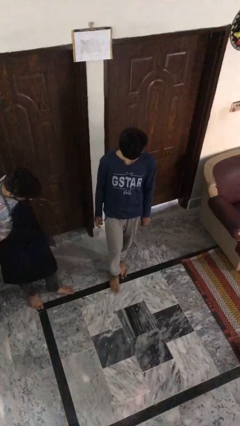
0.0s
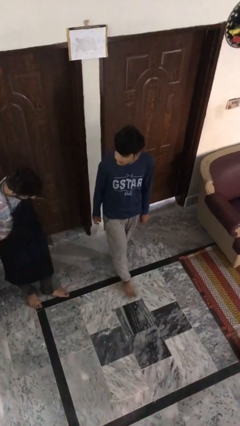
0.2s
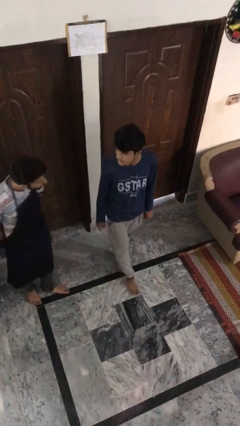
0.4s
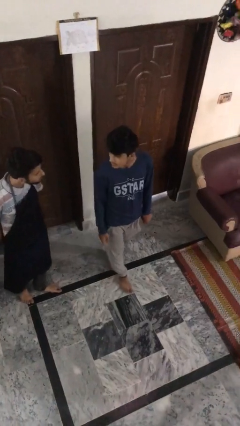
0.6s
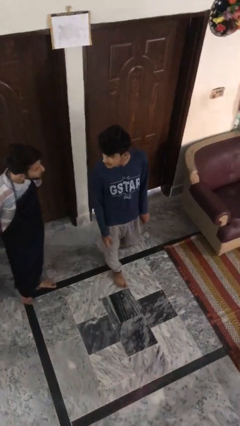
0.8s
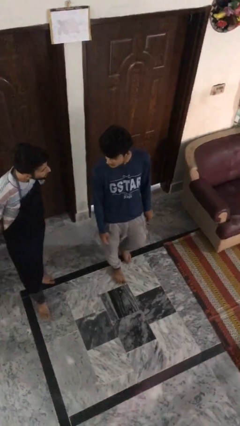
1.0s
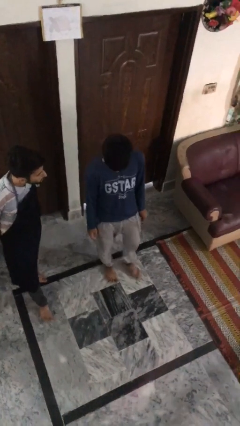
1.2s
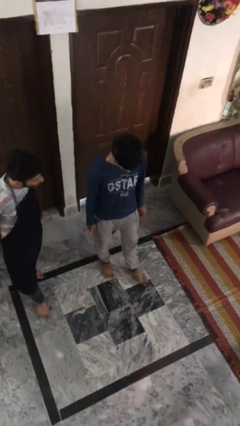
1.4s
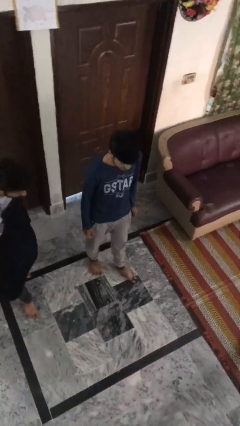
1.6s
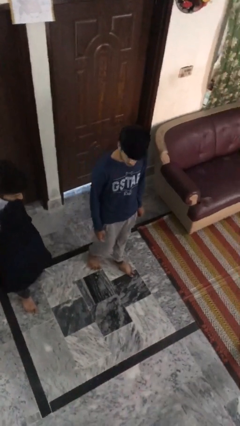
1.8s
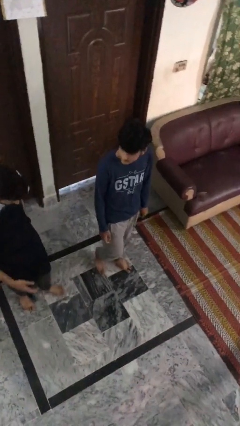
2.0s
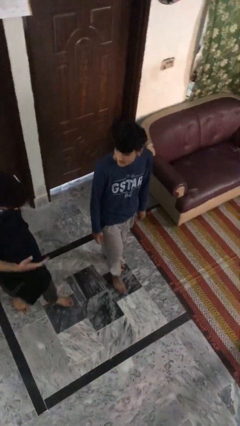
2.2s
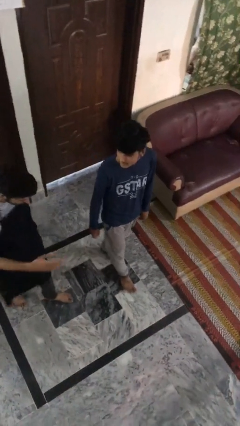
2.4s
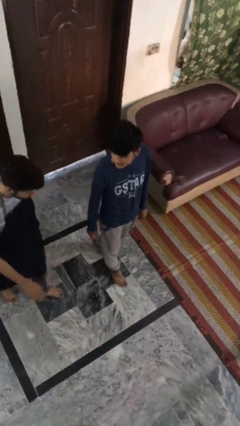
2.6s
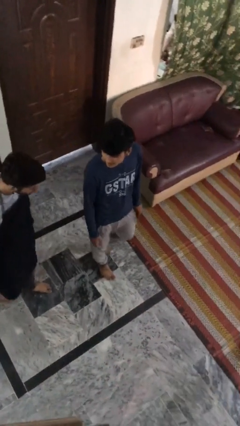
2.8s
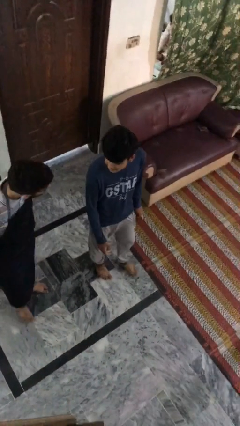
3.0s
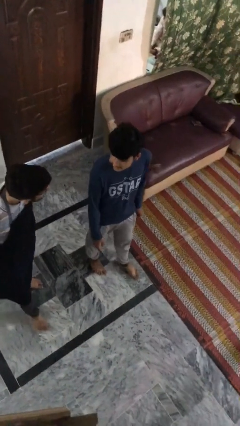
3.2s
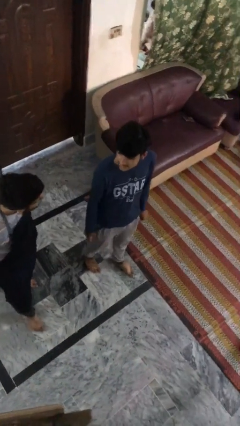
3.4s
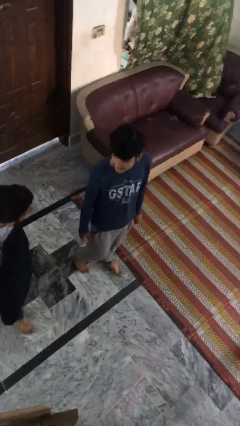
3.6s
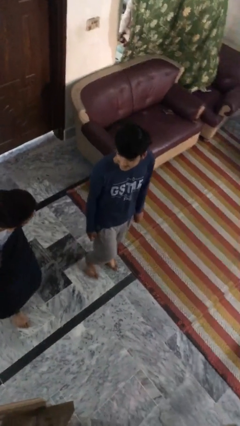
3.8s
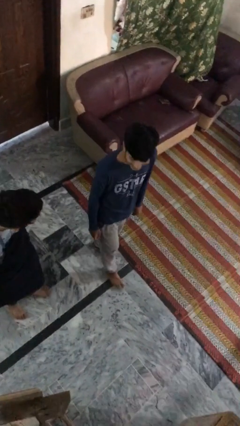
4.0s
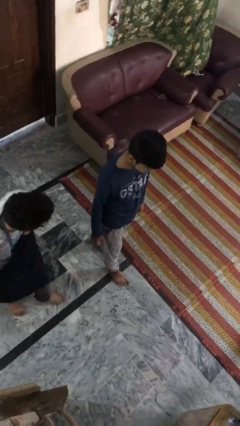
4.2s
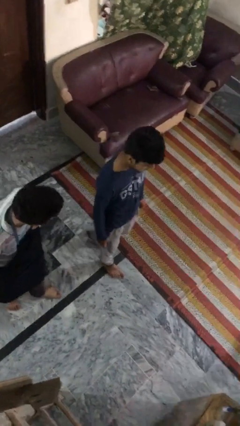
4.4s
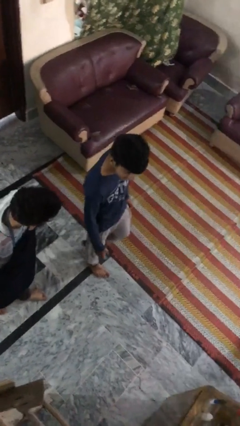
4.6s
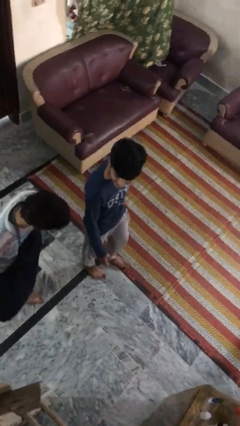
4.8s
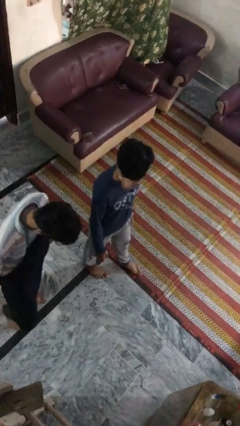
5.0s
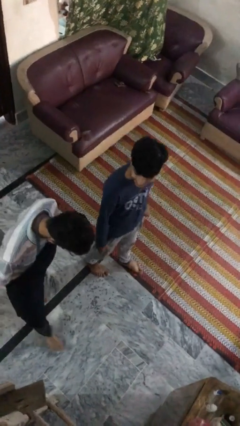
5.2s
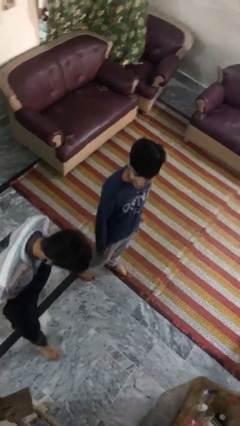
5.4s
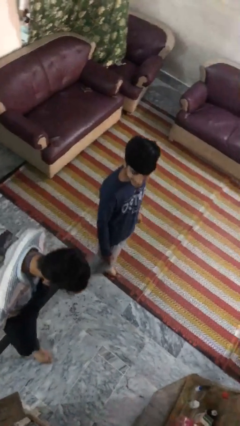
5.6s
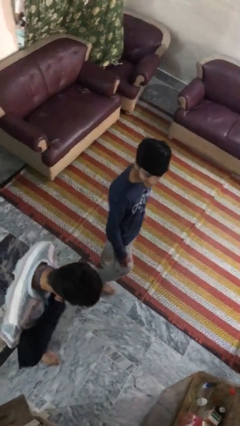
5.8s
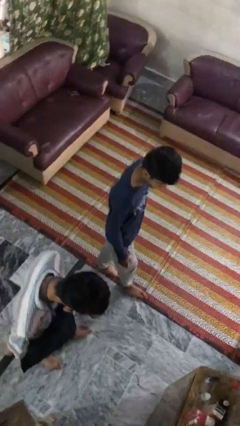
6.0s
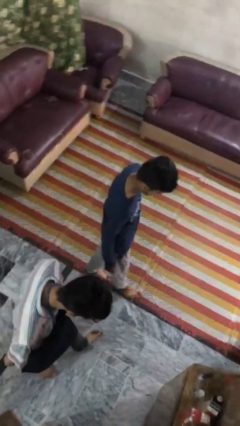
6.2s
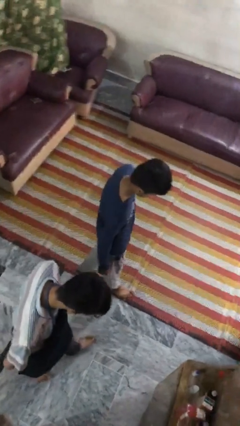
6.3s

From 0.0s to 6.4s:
person talks to person

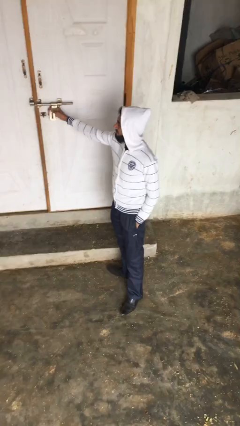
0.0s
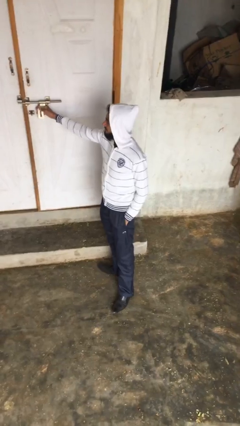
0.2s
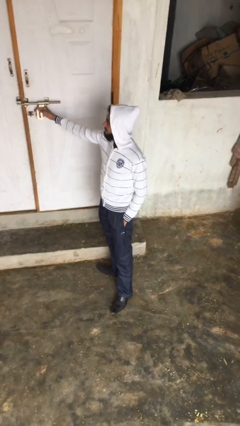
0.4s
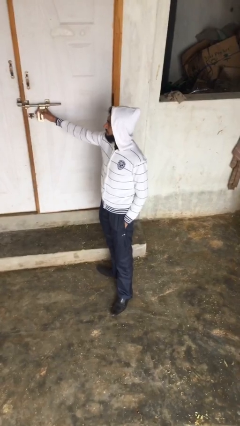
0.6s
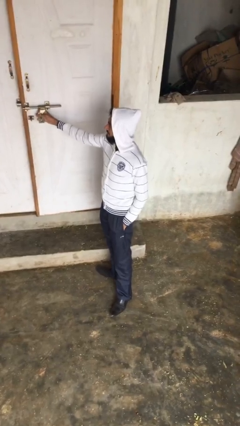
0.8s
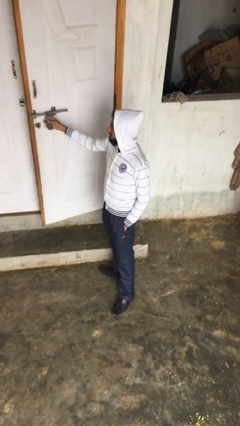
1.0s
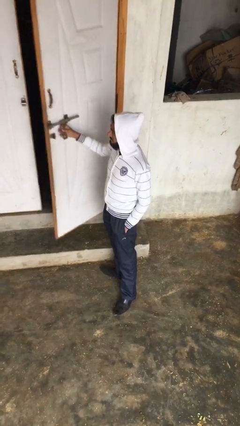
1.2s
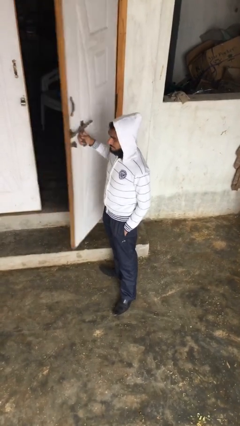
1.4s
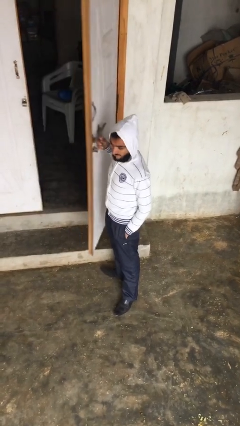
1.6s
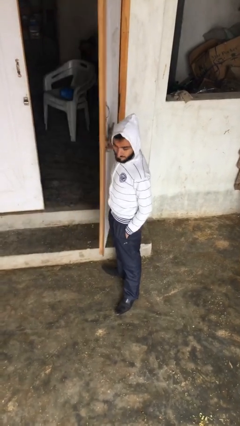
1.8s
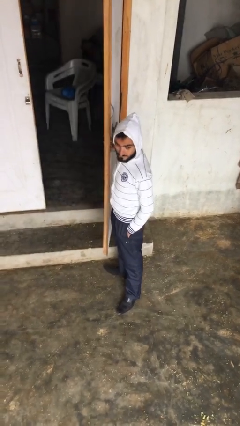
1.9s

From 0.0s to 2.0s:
person opens facility door

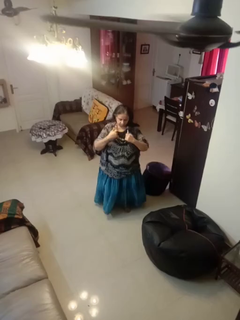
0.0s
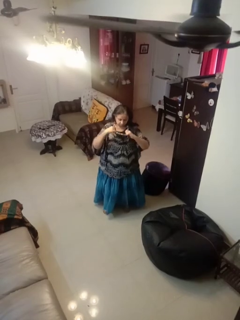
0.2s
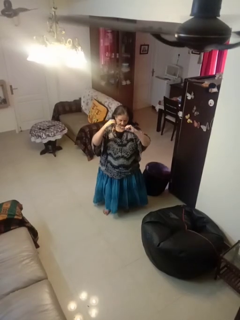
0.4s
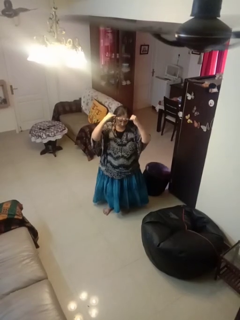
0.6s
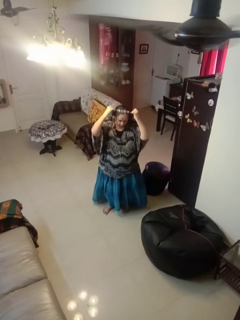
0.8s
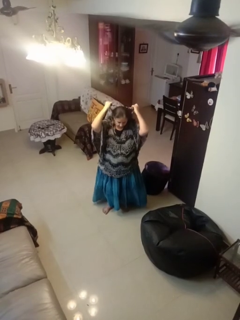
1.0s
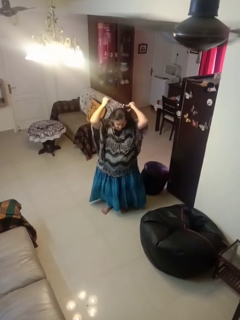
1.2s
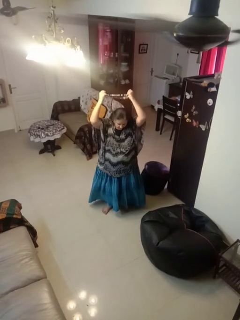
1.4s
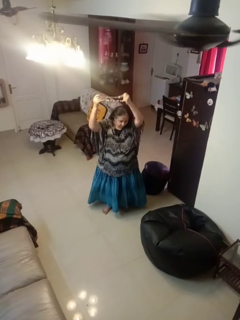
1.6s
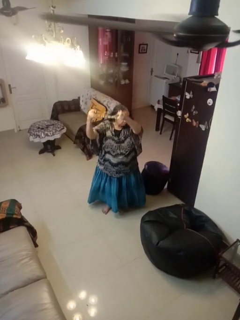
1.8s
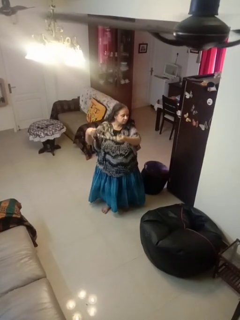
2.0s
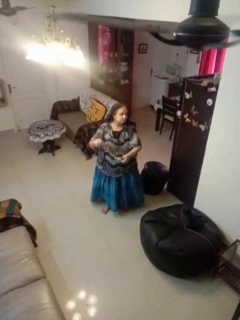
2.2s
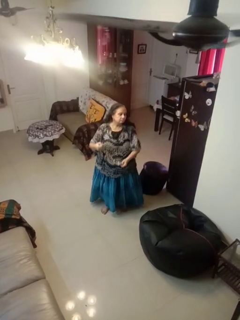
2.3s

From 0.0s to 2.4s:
person takes off necklace

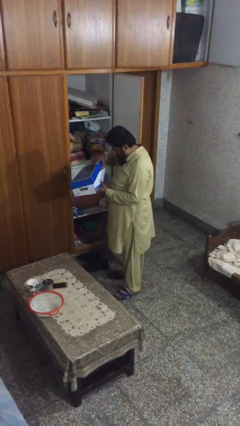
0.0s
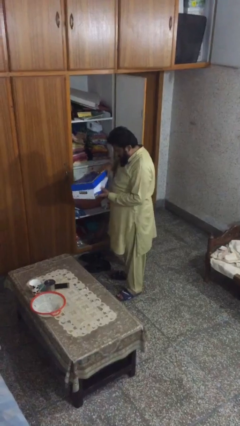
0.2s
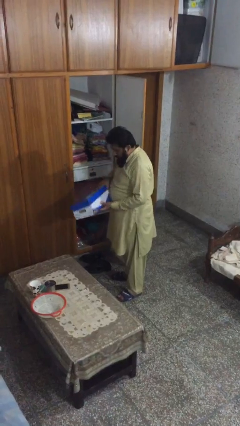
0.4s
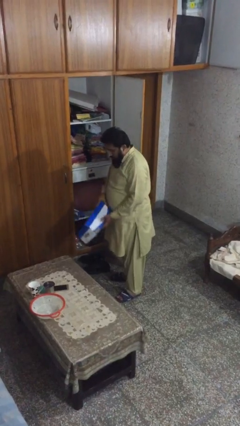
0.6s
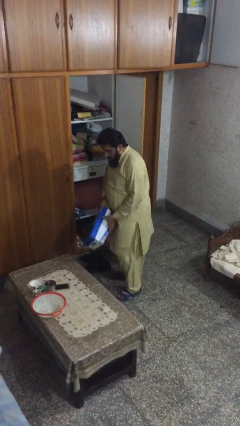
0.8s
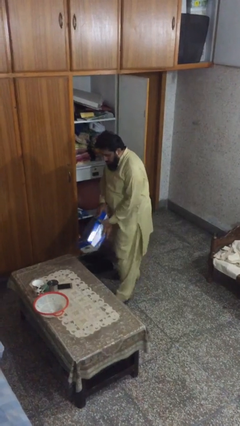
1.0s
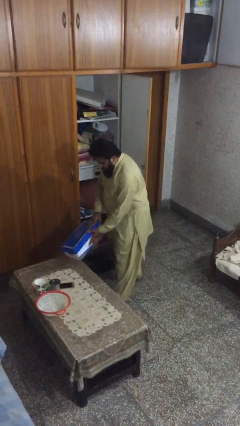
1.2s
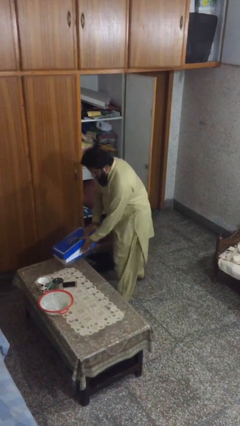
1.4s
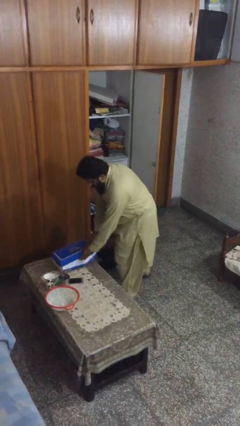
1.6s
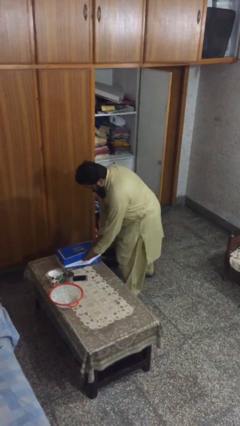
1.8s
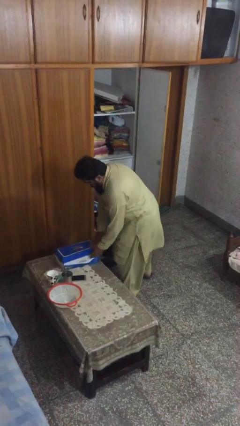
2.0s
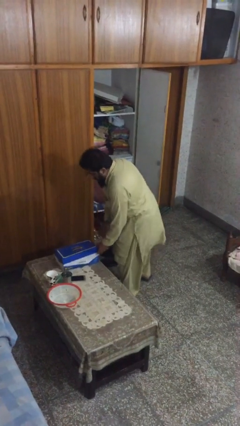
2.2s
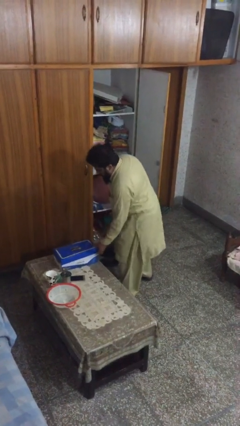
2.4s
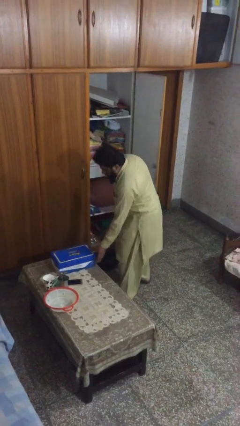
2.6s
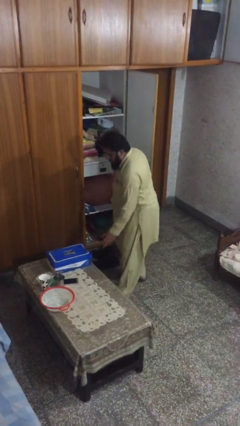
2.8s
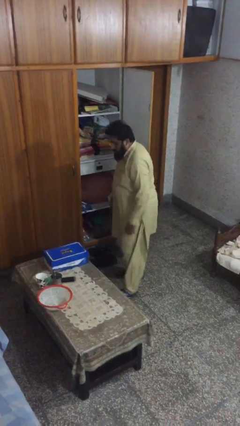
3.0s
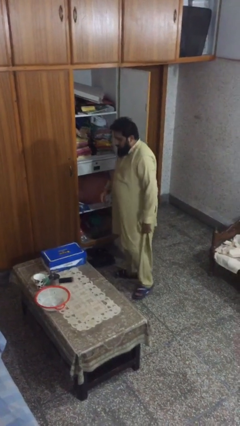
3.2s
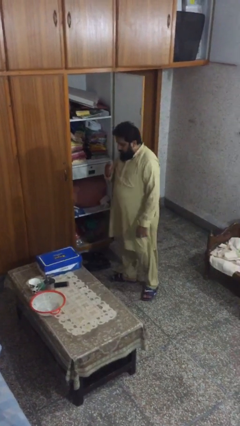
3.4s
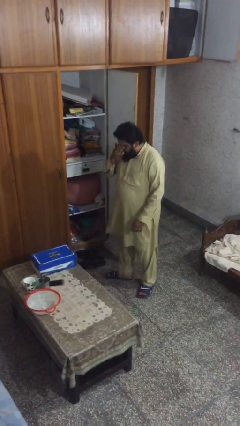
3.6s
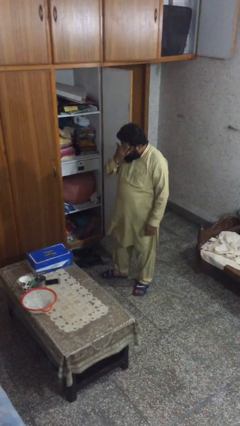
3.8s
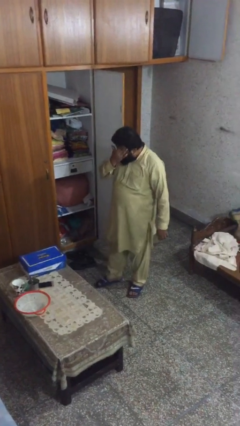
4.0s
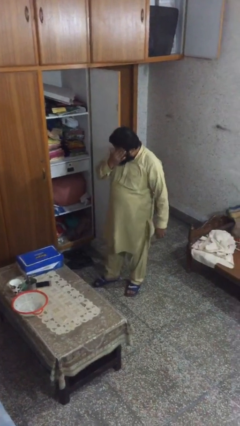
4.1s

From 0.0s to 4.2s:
person puts down object on table

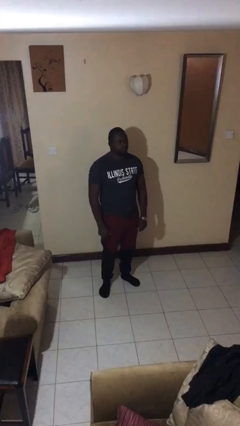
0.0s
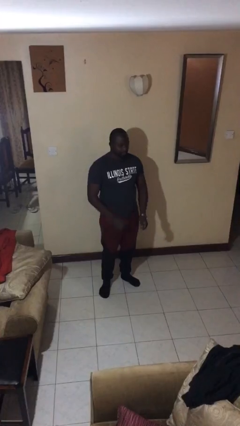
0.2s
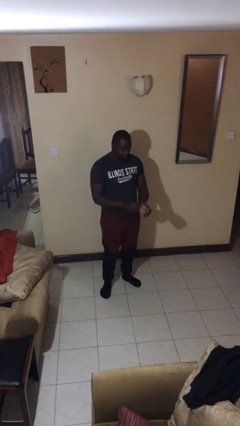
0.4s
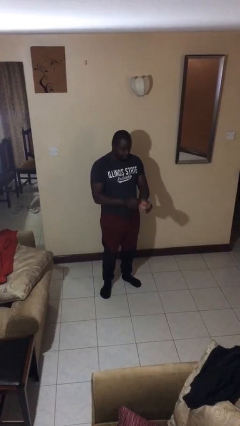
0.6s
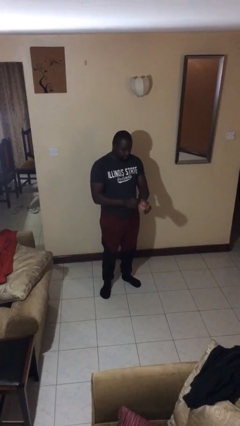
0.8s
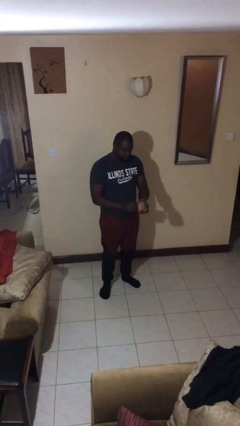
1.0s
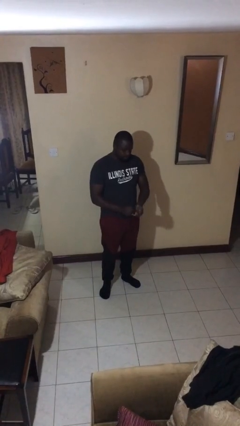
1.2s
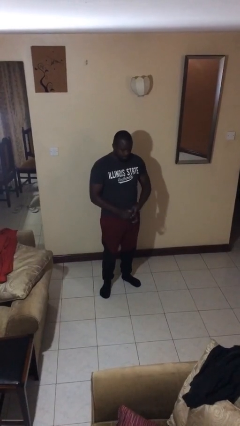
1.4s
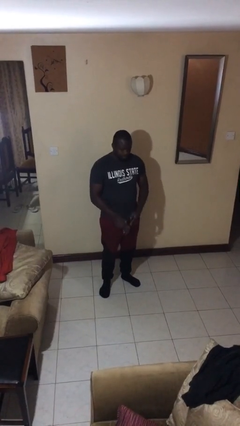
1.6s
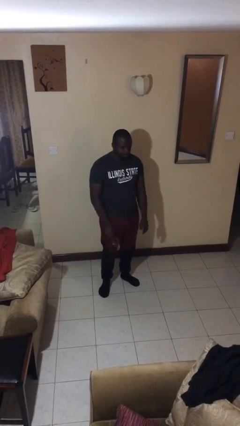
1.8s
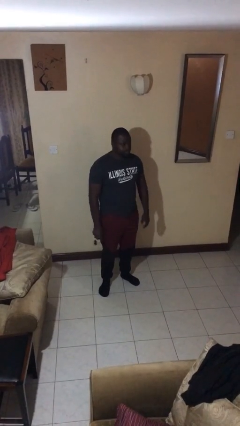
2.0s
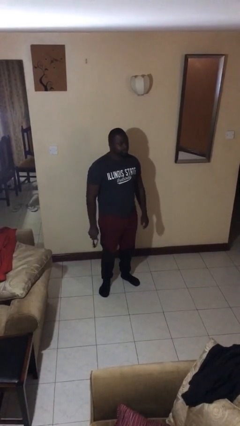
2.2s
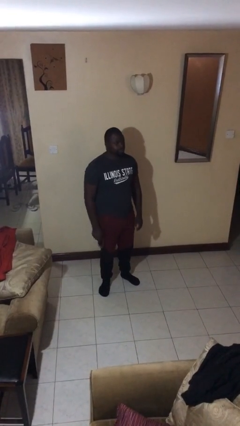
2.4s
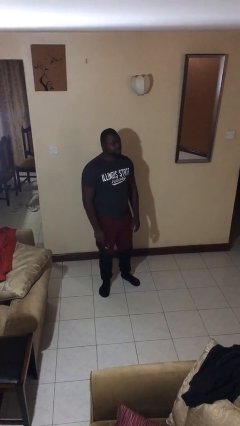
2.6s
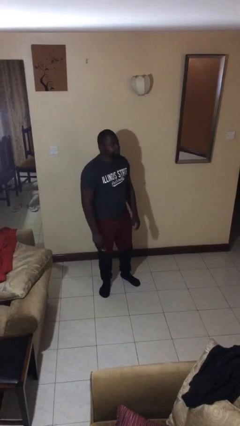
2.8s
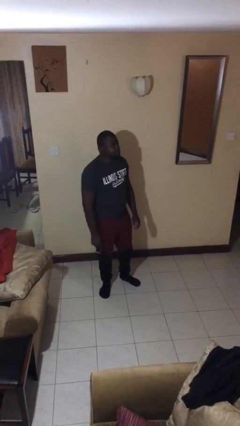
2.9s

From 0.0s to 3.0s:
person takes off wristwatch

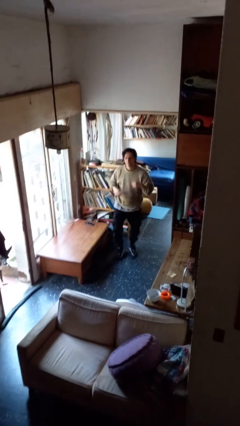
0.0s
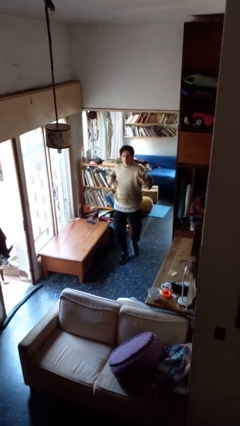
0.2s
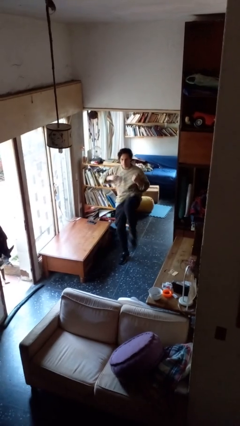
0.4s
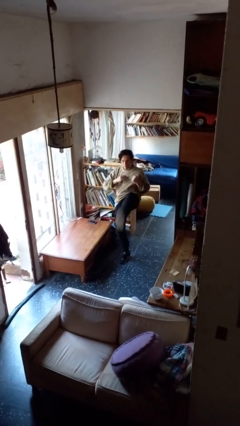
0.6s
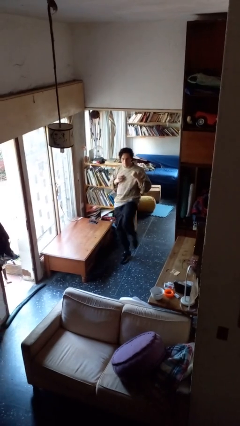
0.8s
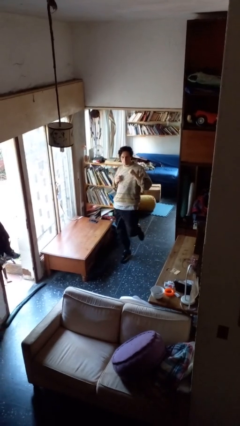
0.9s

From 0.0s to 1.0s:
person karate kicks
